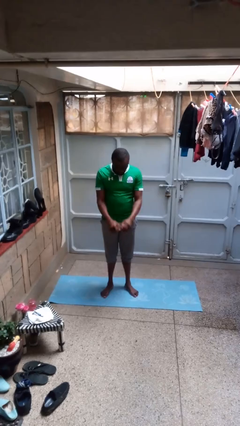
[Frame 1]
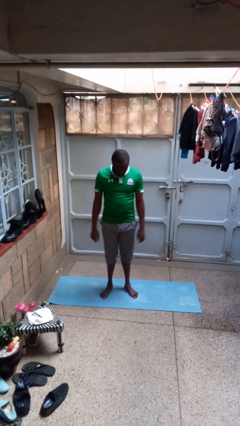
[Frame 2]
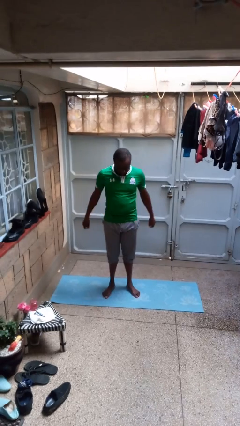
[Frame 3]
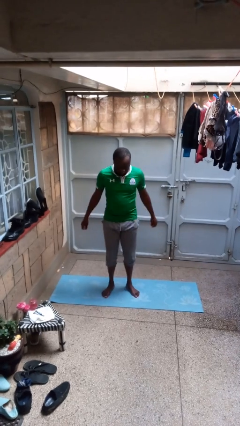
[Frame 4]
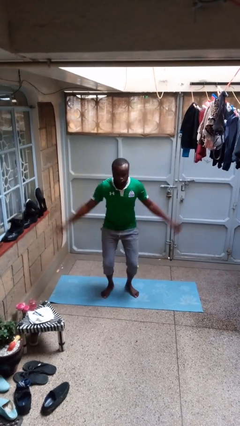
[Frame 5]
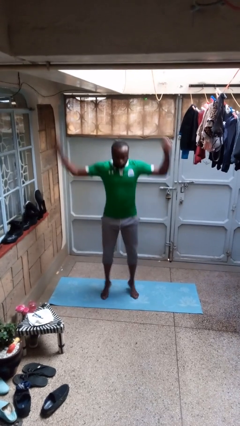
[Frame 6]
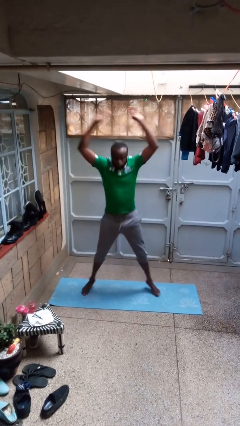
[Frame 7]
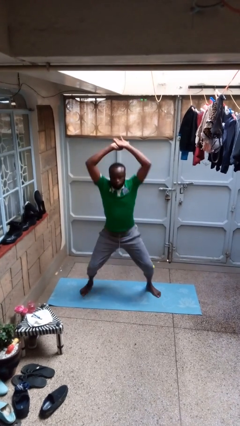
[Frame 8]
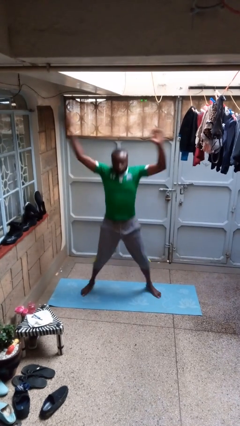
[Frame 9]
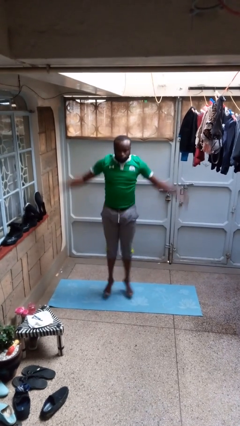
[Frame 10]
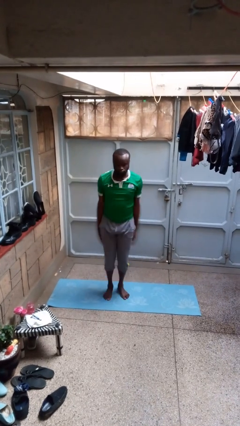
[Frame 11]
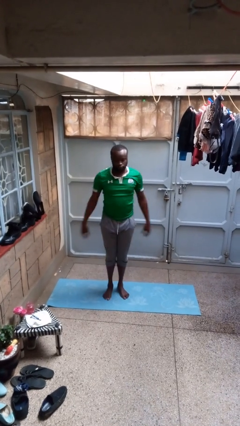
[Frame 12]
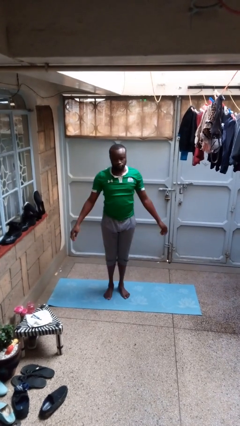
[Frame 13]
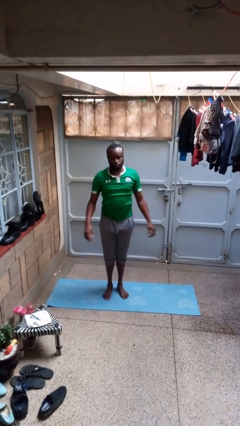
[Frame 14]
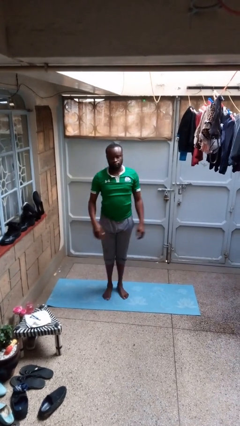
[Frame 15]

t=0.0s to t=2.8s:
person exercises with jumping jacks

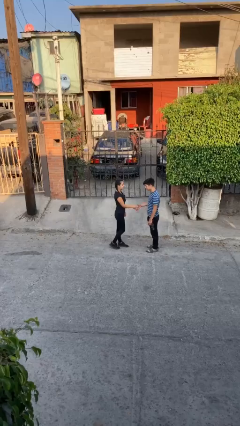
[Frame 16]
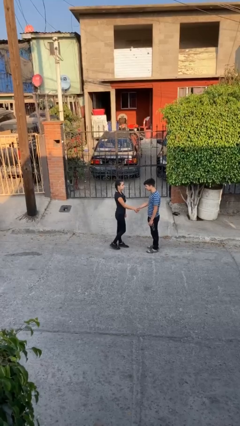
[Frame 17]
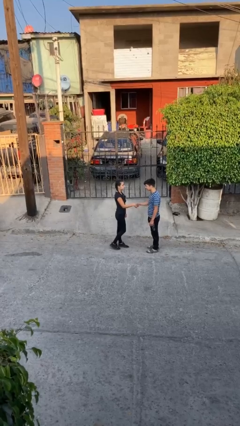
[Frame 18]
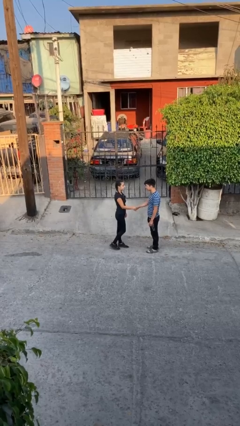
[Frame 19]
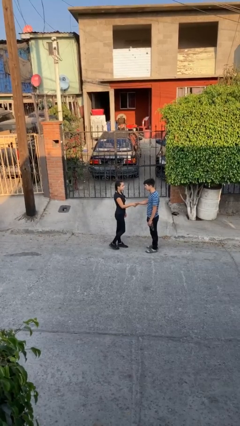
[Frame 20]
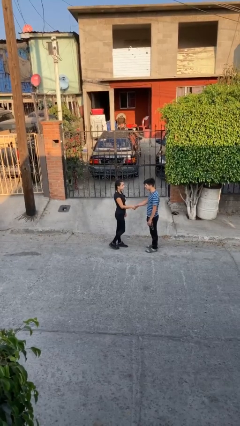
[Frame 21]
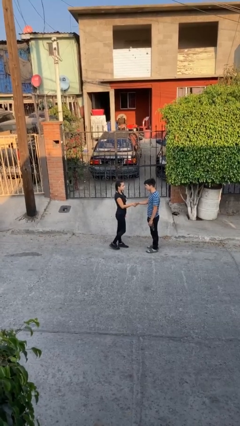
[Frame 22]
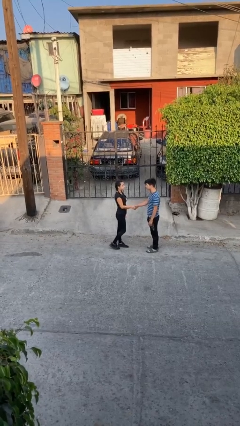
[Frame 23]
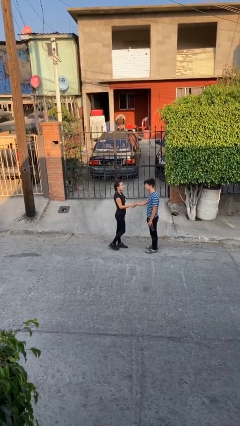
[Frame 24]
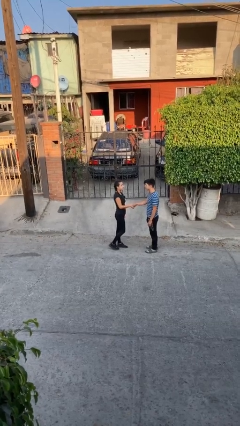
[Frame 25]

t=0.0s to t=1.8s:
person shakes hand

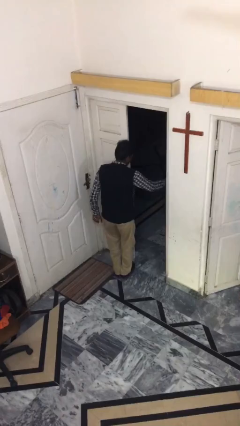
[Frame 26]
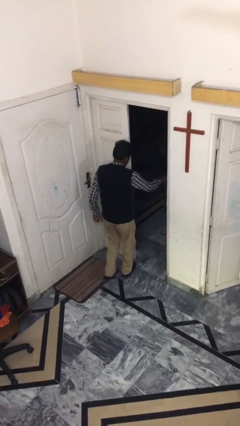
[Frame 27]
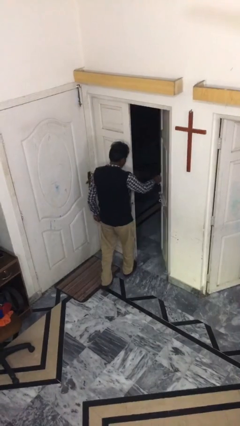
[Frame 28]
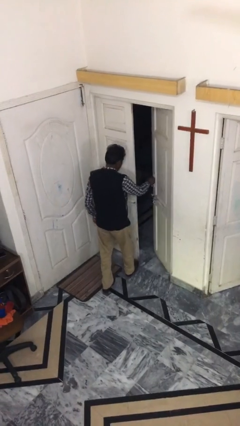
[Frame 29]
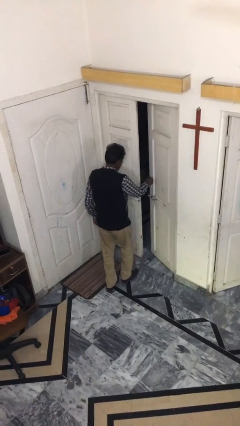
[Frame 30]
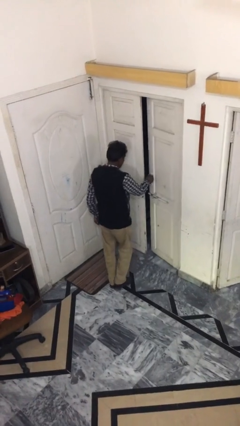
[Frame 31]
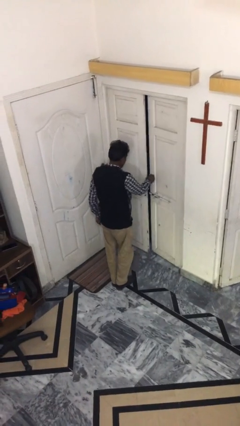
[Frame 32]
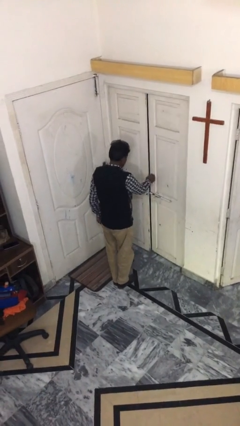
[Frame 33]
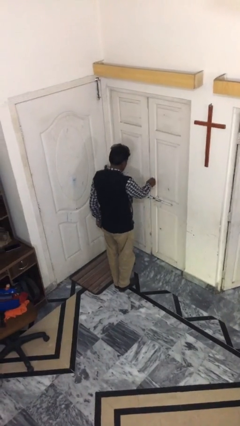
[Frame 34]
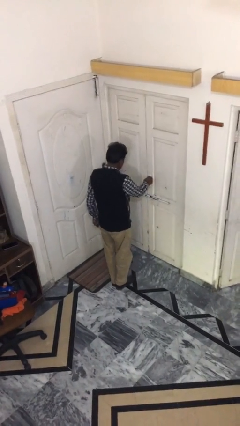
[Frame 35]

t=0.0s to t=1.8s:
person closes facility door

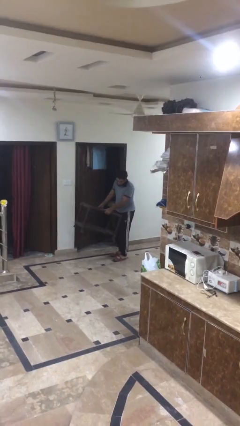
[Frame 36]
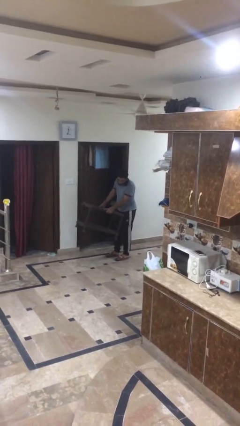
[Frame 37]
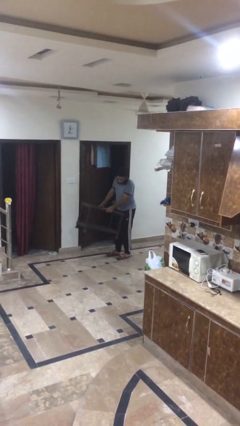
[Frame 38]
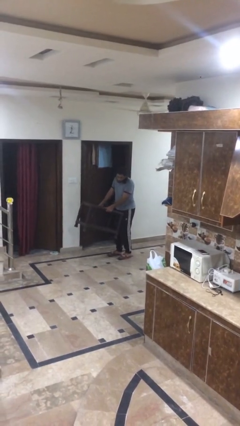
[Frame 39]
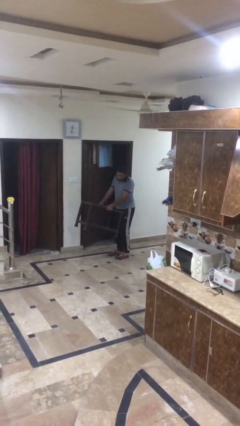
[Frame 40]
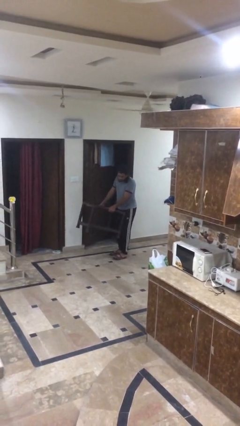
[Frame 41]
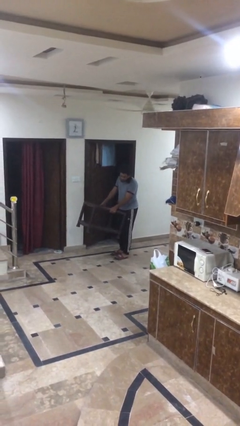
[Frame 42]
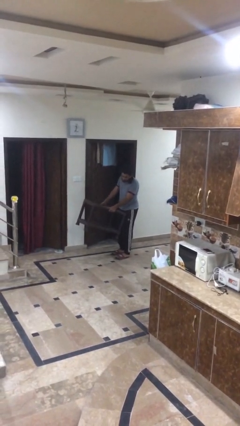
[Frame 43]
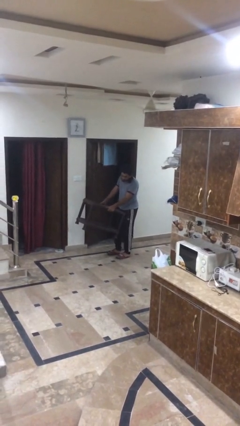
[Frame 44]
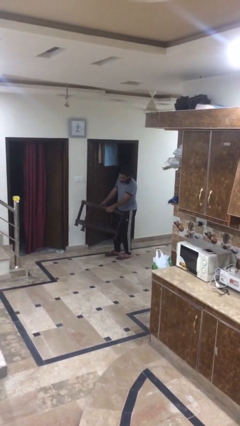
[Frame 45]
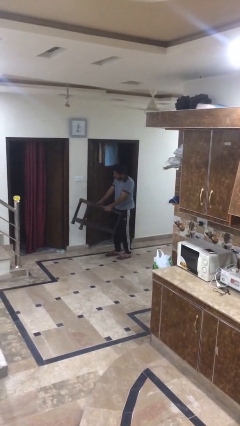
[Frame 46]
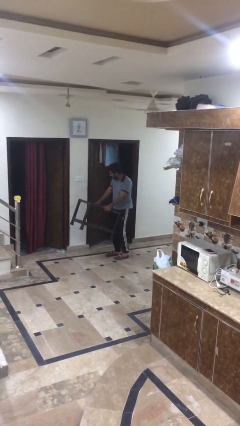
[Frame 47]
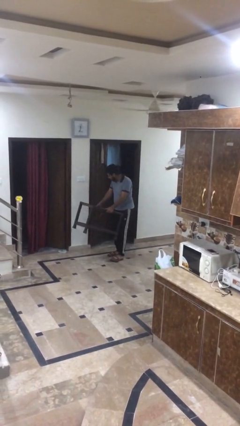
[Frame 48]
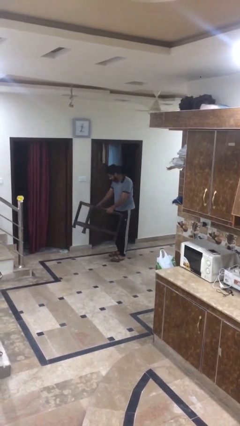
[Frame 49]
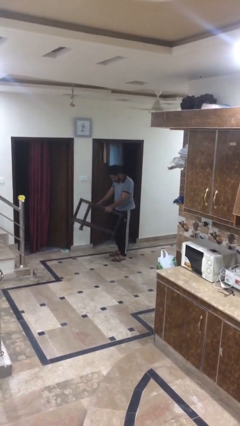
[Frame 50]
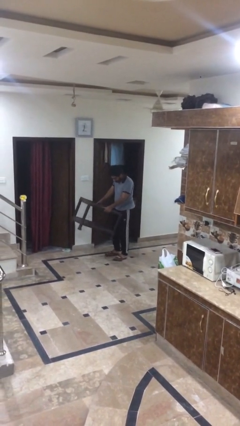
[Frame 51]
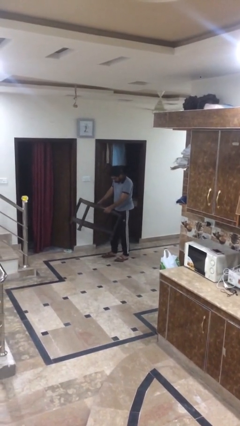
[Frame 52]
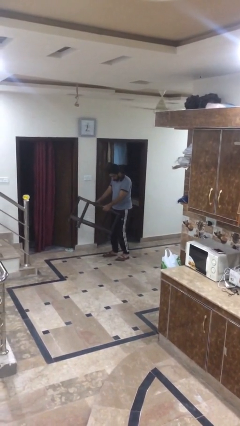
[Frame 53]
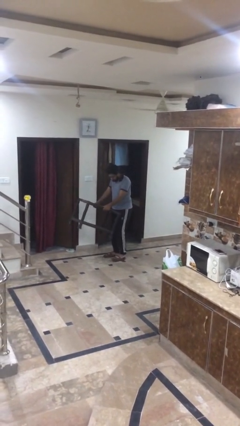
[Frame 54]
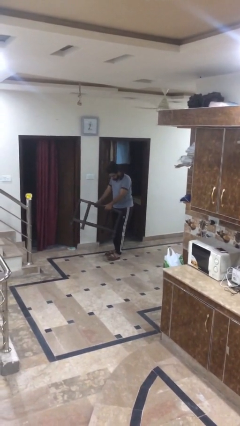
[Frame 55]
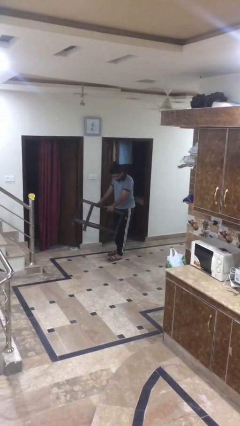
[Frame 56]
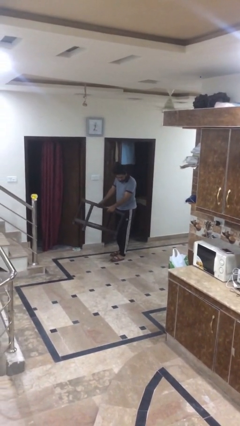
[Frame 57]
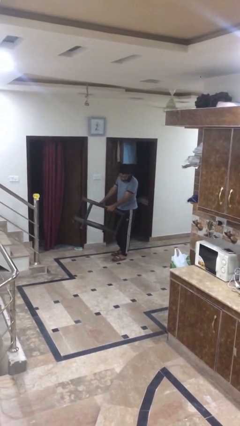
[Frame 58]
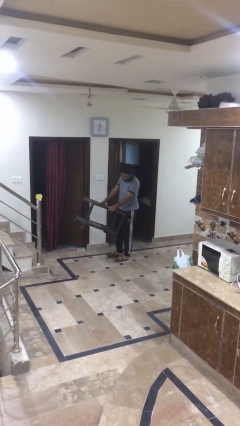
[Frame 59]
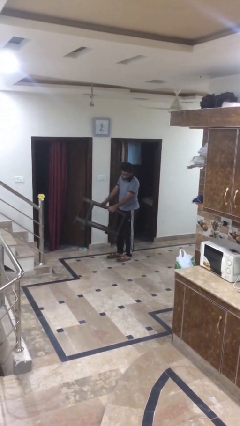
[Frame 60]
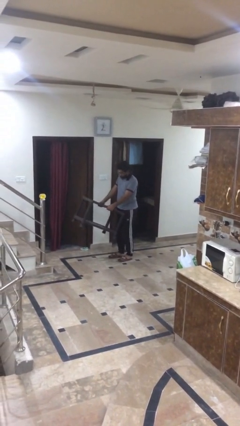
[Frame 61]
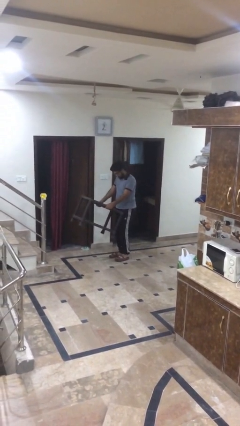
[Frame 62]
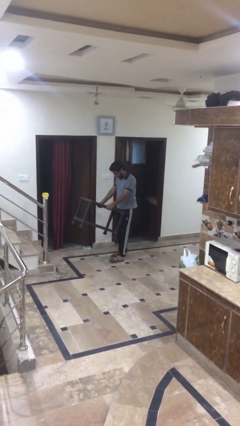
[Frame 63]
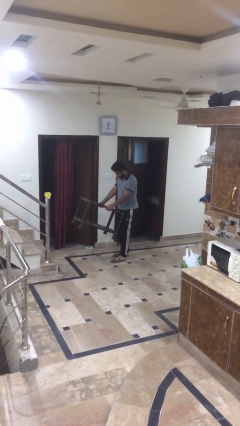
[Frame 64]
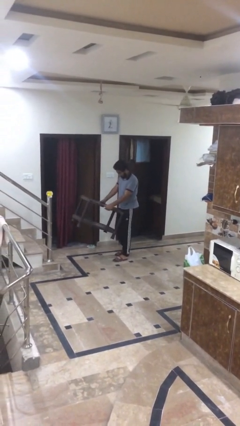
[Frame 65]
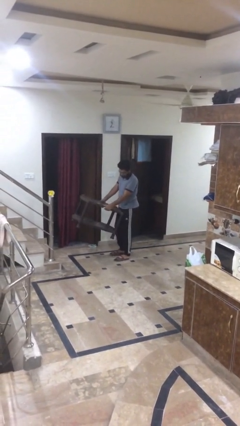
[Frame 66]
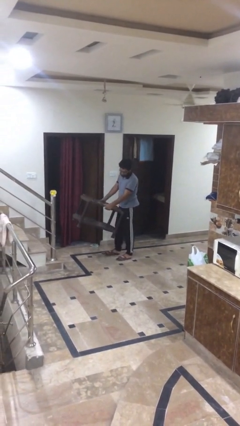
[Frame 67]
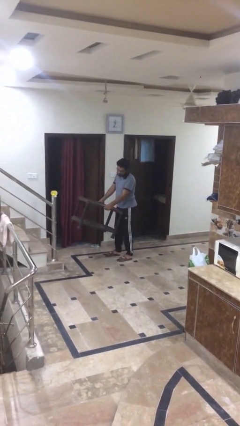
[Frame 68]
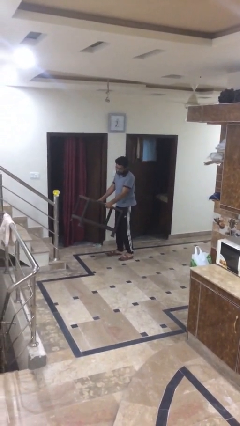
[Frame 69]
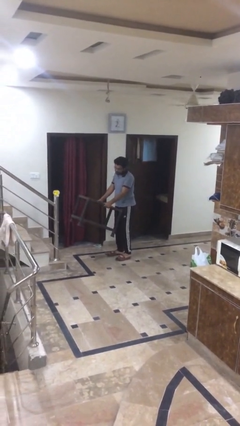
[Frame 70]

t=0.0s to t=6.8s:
person carries heavy object

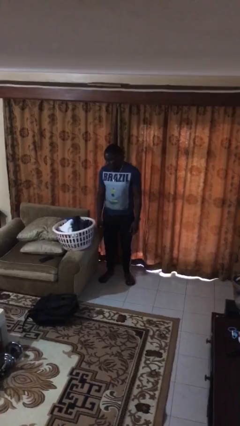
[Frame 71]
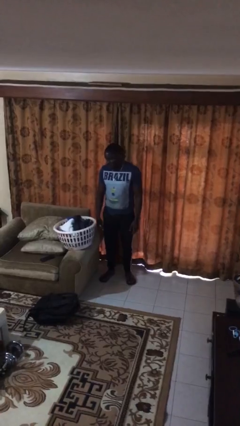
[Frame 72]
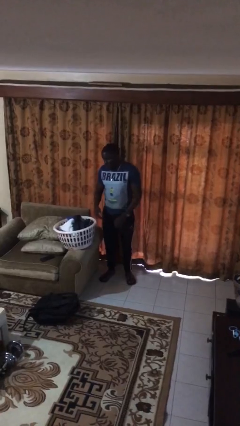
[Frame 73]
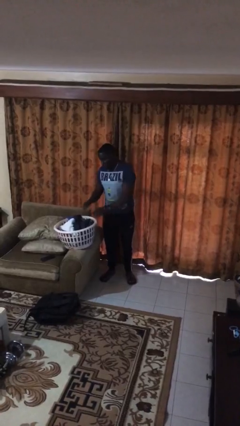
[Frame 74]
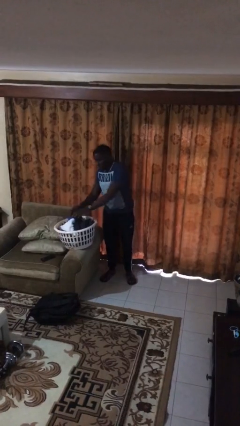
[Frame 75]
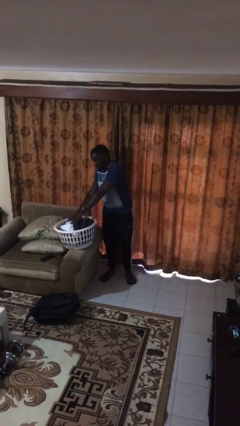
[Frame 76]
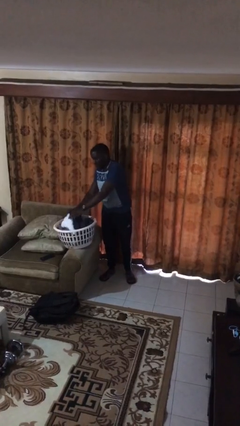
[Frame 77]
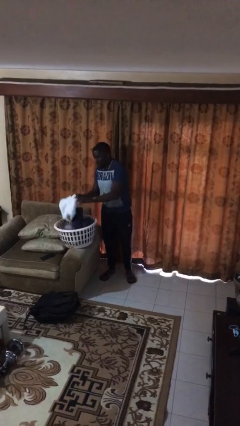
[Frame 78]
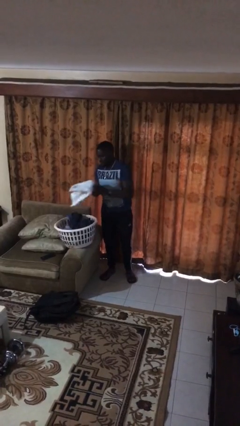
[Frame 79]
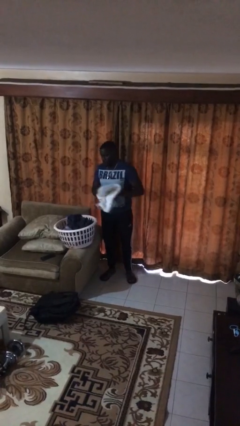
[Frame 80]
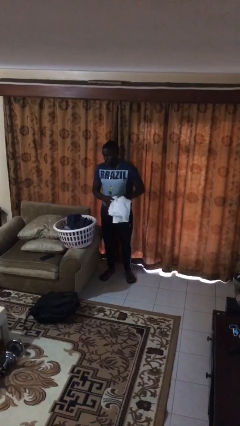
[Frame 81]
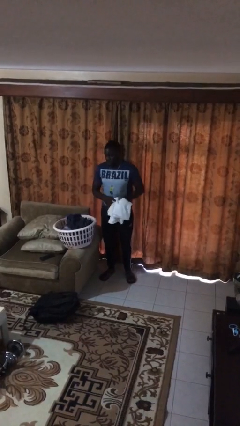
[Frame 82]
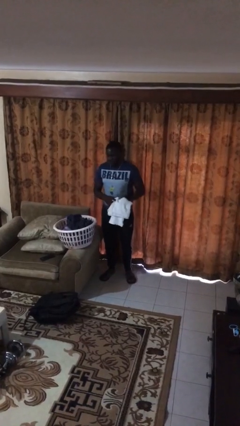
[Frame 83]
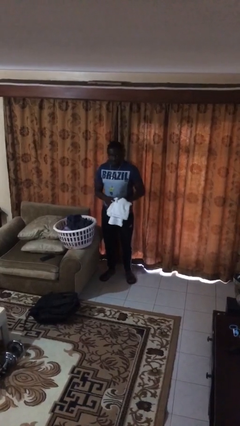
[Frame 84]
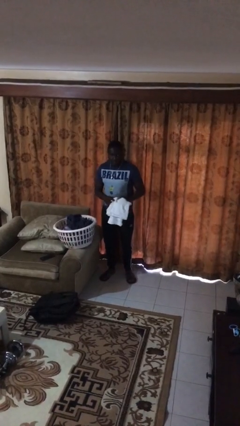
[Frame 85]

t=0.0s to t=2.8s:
person takes object from basket

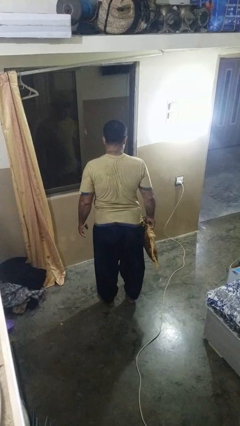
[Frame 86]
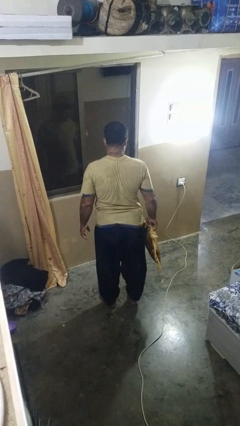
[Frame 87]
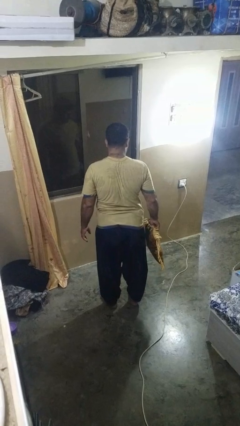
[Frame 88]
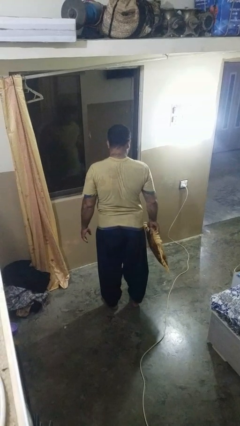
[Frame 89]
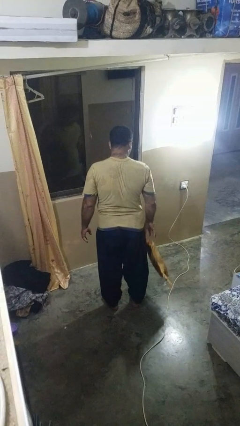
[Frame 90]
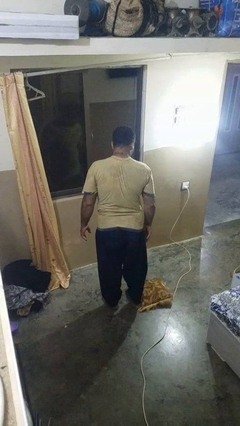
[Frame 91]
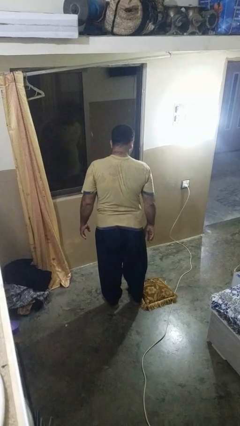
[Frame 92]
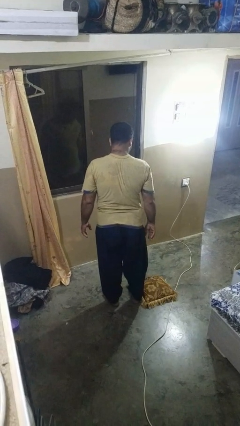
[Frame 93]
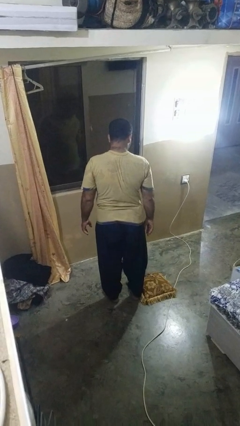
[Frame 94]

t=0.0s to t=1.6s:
person drops object
